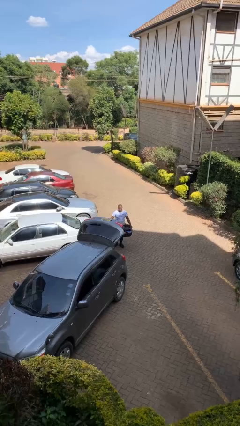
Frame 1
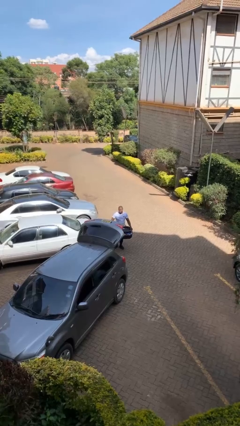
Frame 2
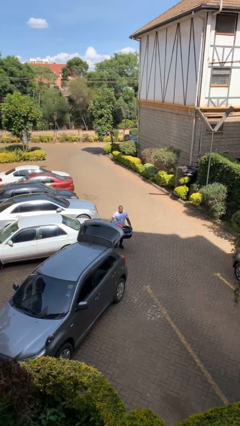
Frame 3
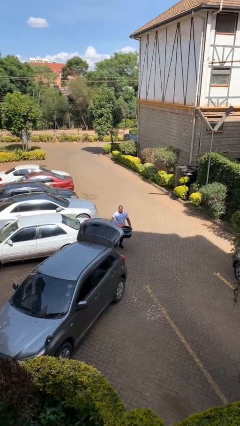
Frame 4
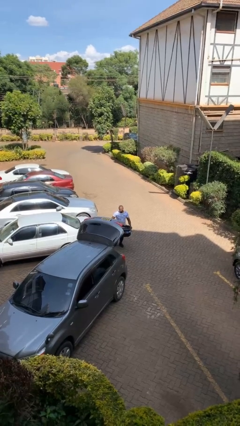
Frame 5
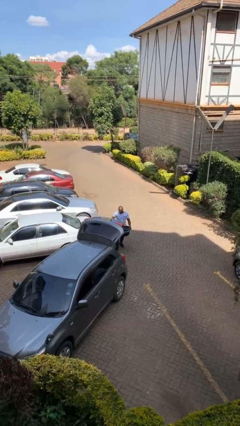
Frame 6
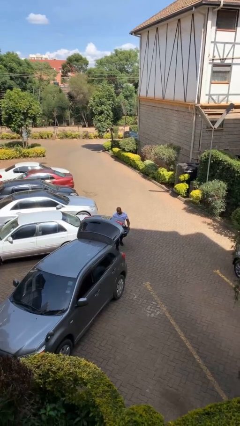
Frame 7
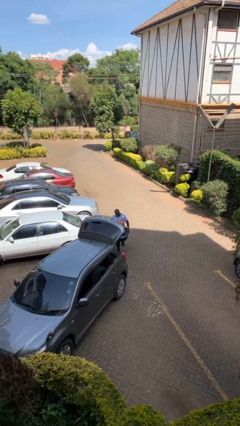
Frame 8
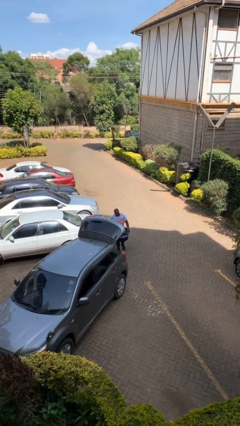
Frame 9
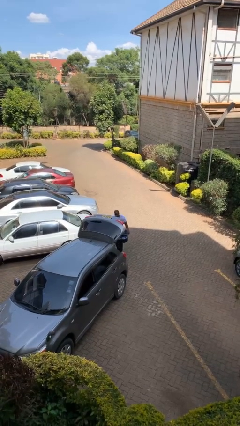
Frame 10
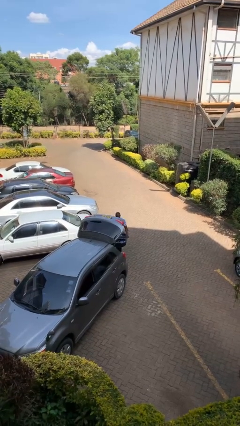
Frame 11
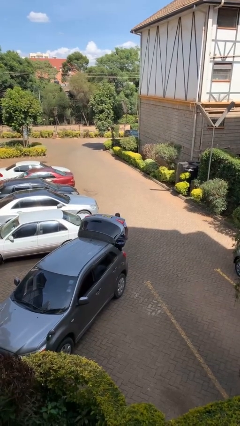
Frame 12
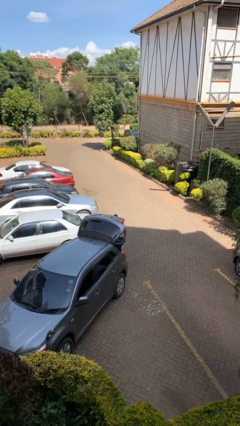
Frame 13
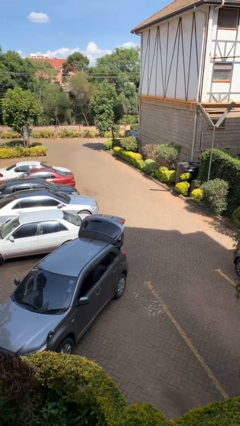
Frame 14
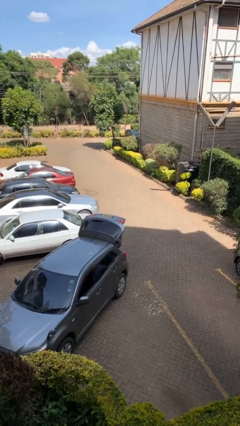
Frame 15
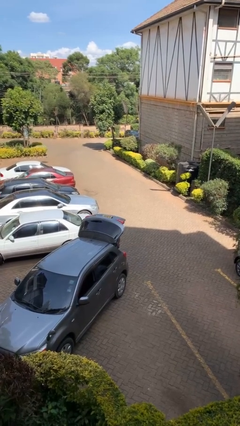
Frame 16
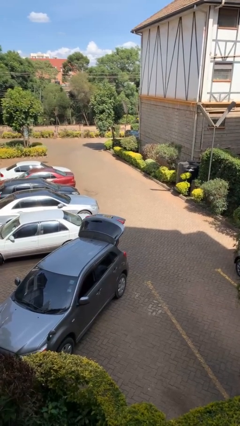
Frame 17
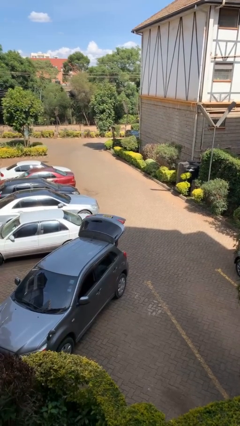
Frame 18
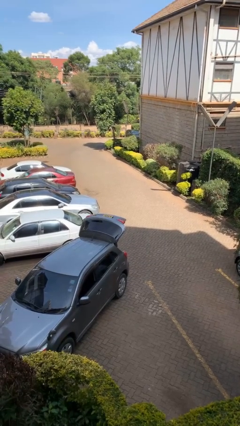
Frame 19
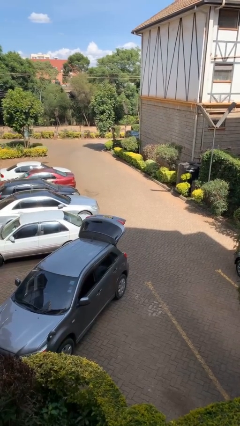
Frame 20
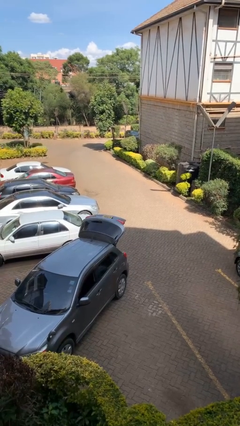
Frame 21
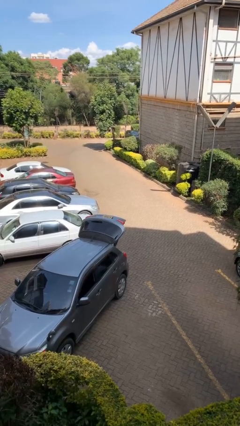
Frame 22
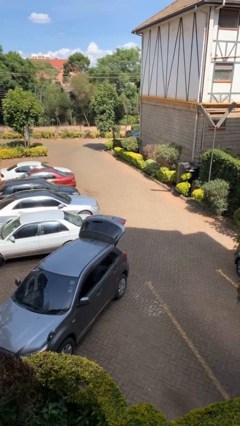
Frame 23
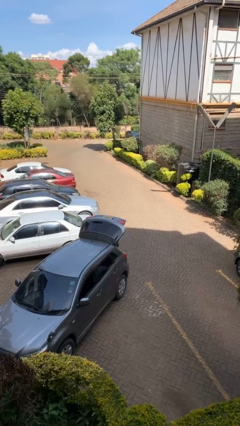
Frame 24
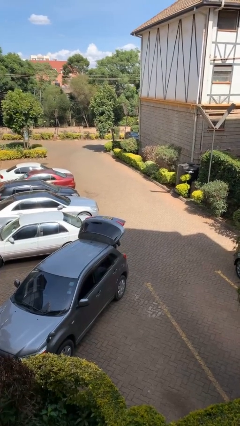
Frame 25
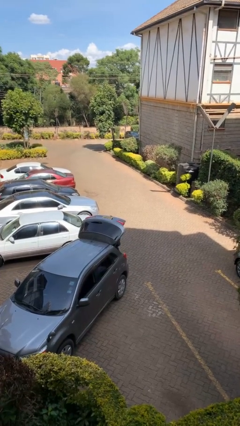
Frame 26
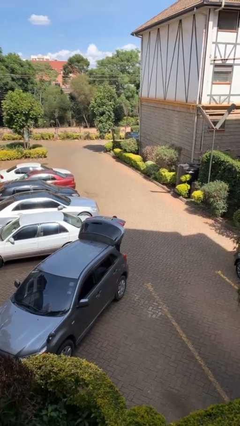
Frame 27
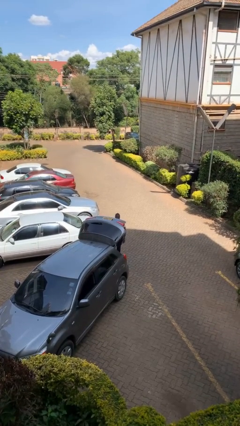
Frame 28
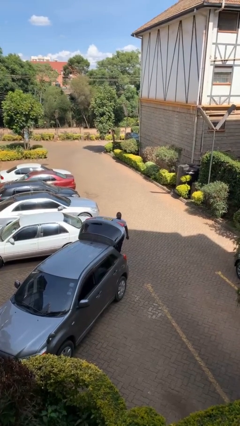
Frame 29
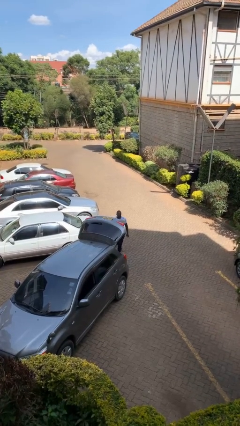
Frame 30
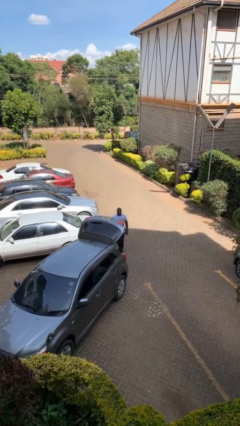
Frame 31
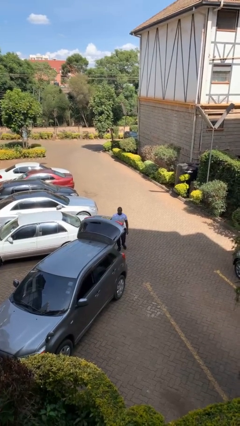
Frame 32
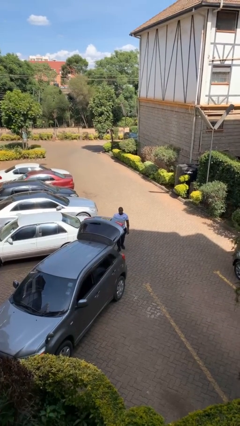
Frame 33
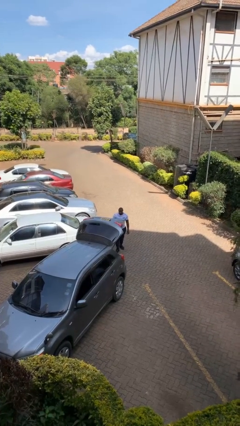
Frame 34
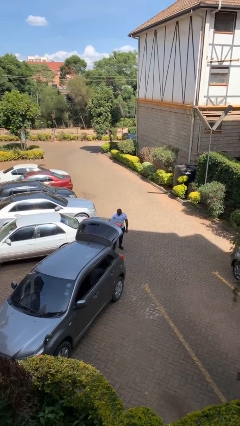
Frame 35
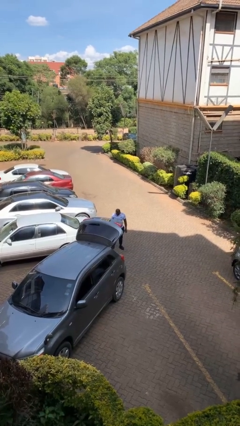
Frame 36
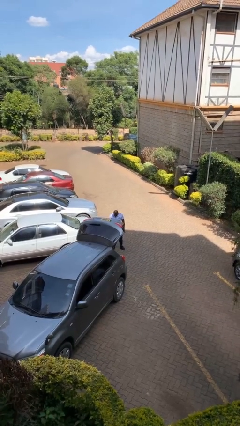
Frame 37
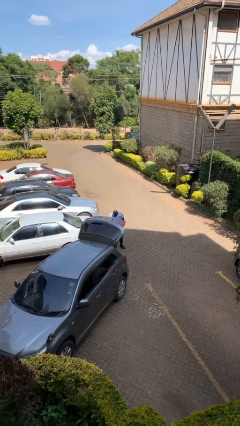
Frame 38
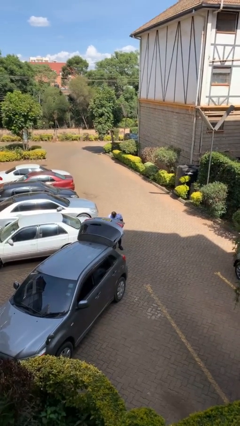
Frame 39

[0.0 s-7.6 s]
person loads car

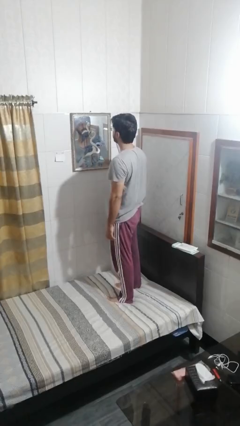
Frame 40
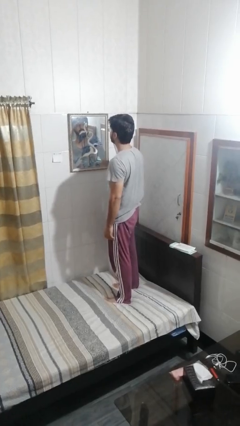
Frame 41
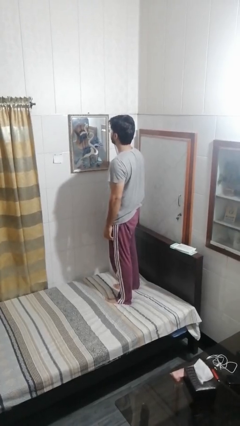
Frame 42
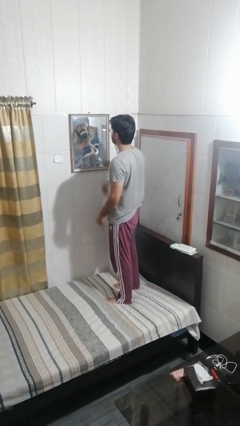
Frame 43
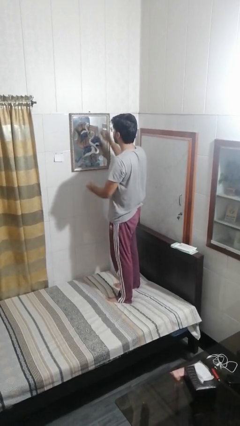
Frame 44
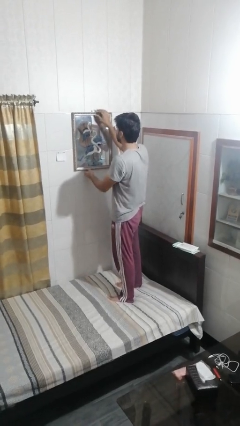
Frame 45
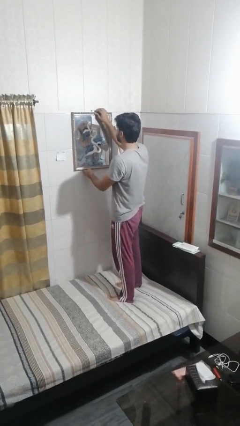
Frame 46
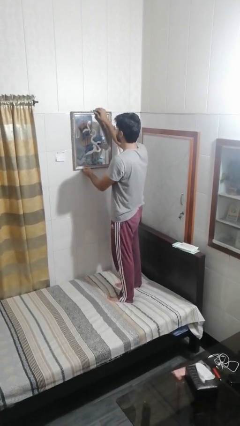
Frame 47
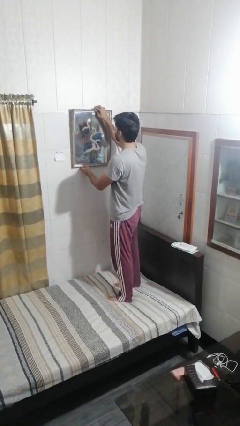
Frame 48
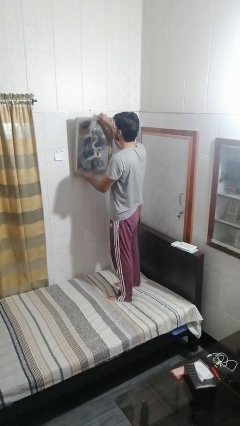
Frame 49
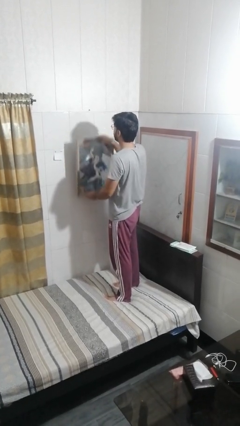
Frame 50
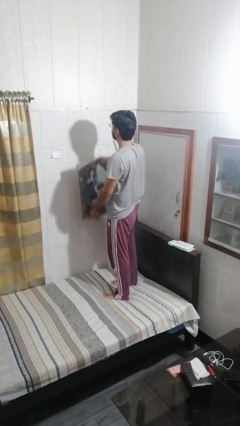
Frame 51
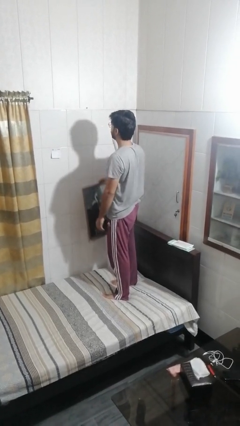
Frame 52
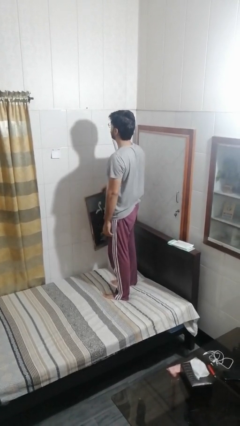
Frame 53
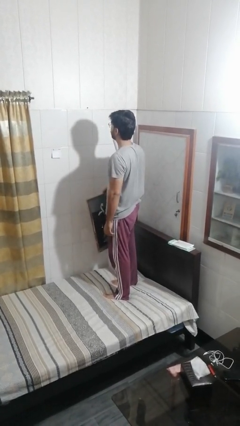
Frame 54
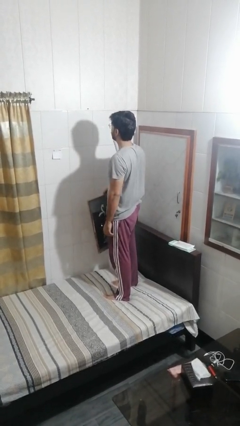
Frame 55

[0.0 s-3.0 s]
person takes down picture frame

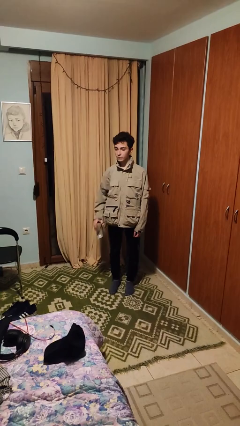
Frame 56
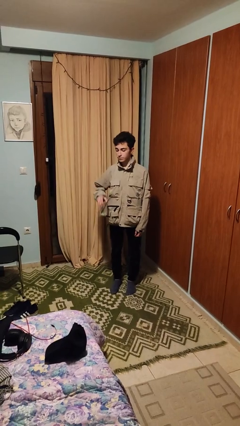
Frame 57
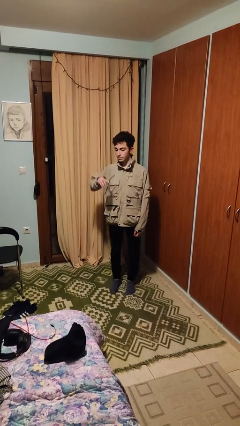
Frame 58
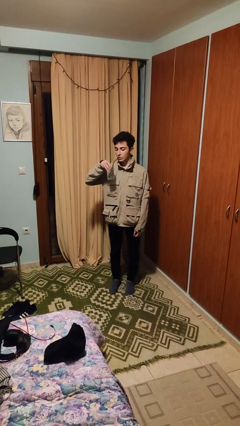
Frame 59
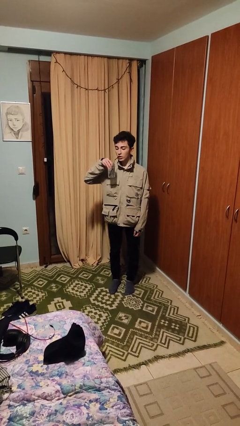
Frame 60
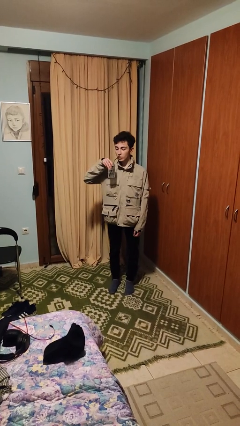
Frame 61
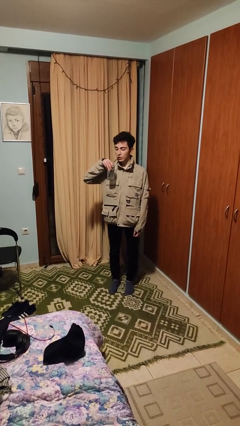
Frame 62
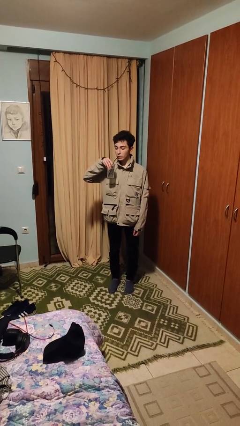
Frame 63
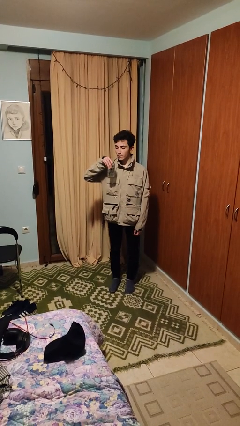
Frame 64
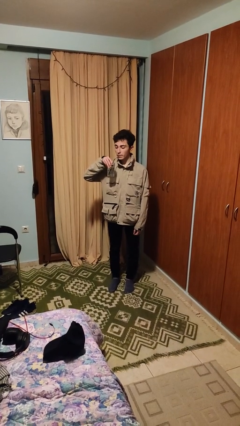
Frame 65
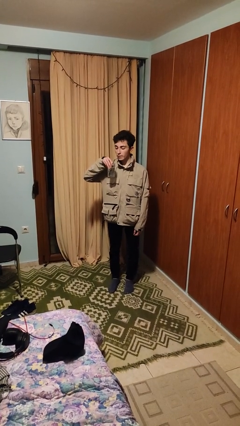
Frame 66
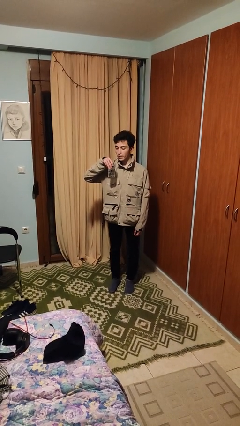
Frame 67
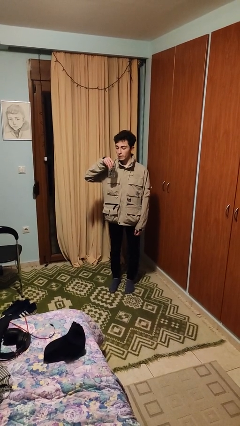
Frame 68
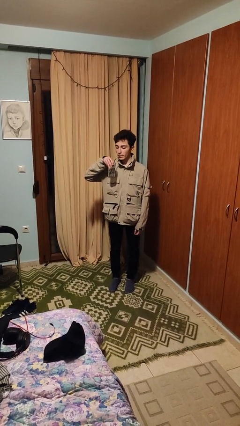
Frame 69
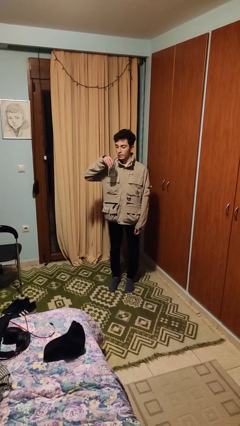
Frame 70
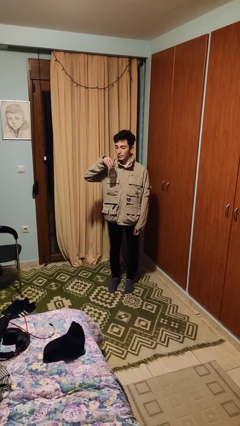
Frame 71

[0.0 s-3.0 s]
person drinks from straw

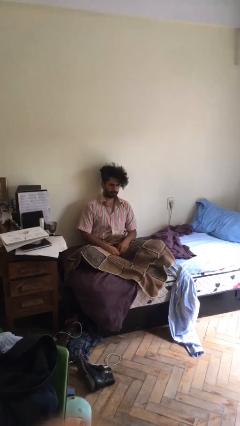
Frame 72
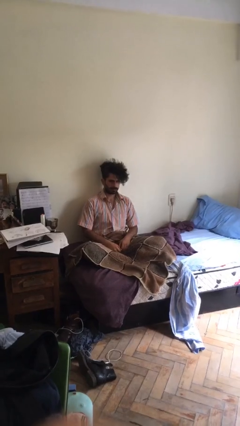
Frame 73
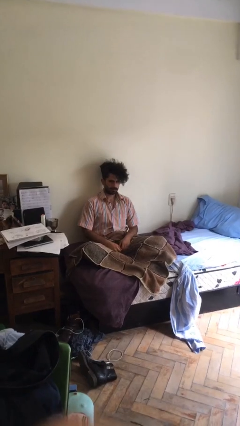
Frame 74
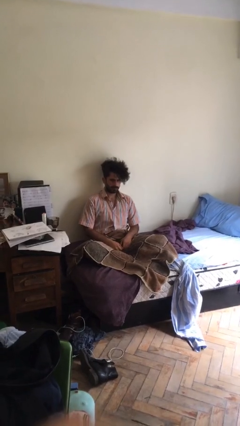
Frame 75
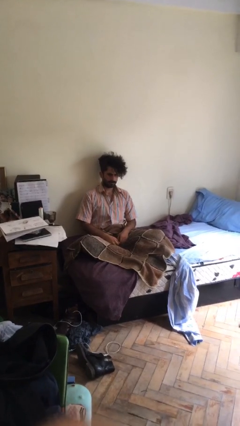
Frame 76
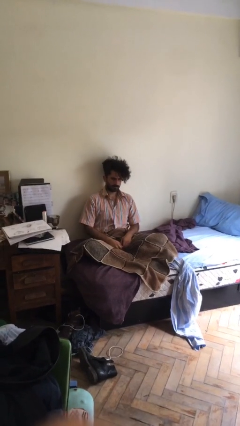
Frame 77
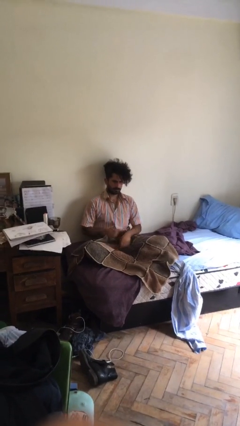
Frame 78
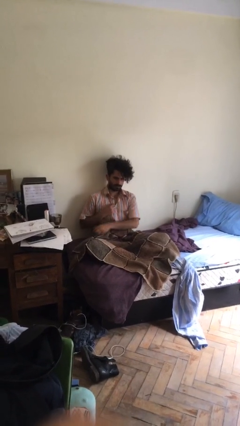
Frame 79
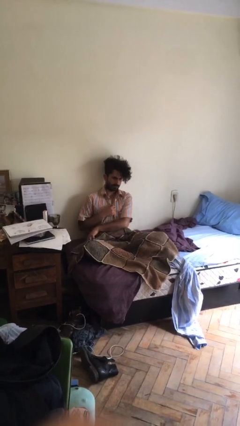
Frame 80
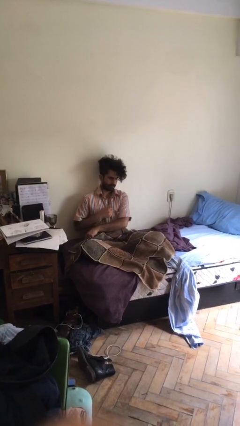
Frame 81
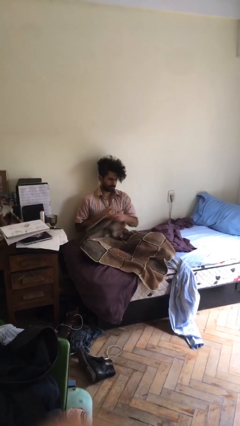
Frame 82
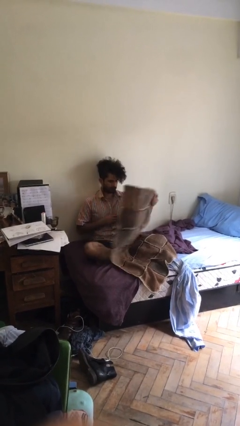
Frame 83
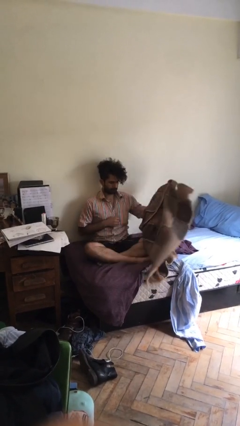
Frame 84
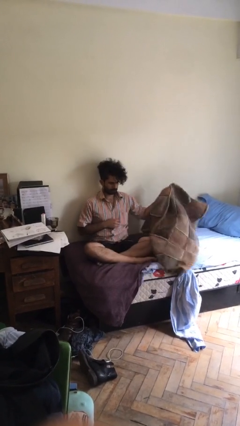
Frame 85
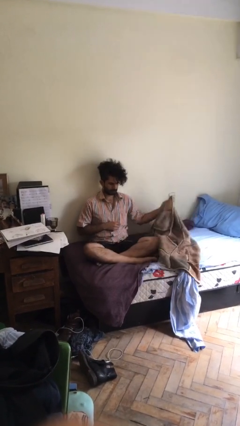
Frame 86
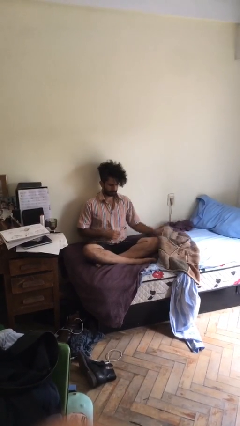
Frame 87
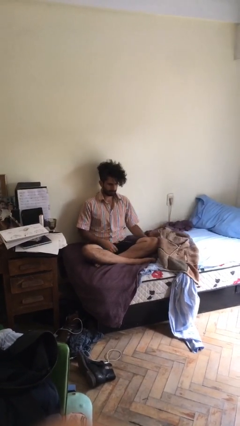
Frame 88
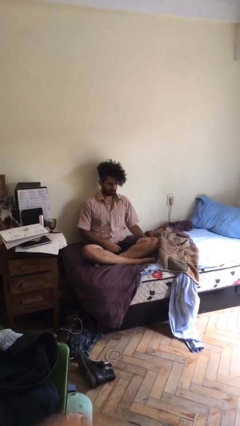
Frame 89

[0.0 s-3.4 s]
person uncovers with blanket

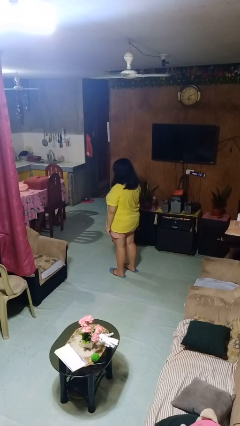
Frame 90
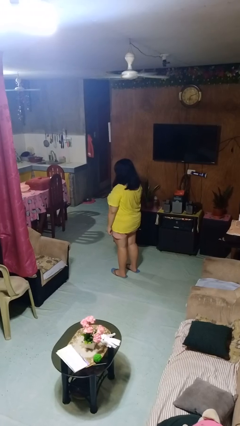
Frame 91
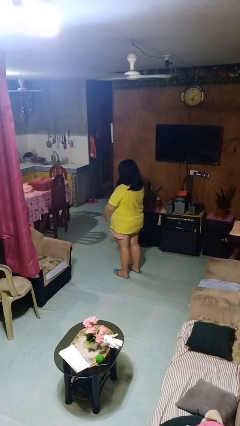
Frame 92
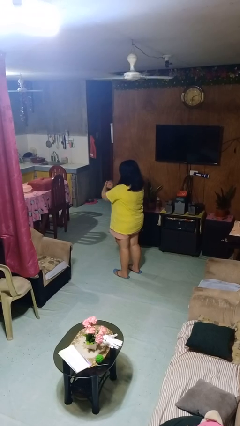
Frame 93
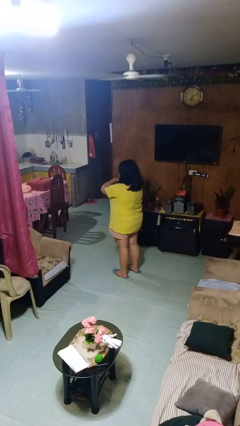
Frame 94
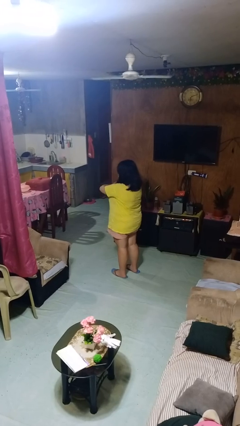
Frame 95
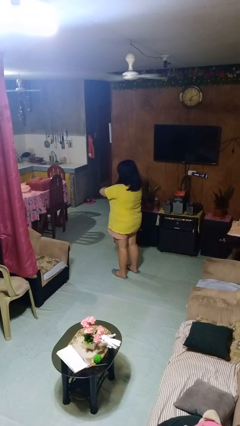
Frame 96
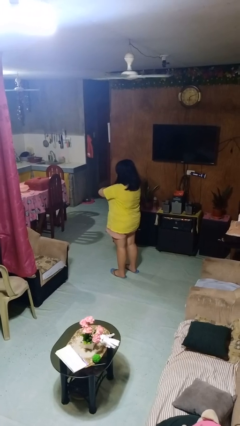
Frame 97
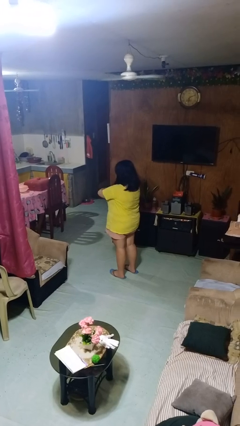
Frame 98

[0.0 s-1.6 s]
person crosses arms
